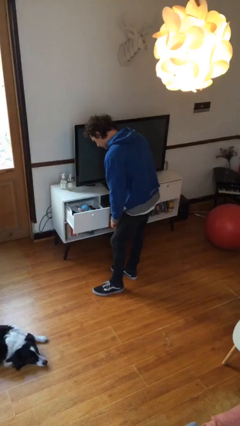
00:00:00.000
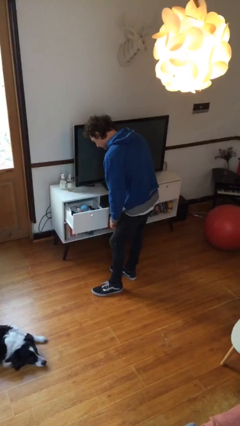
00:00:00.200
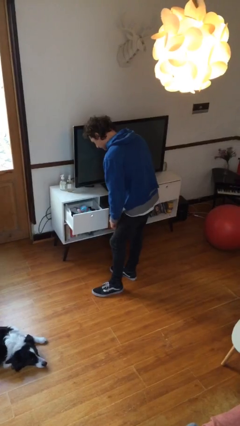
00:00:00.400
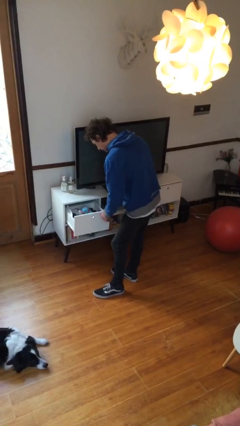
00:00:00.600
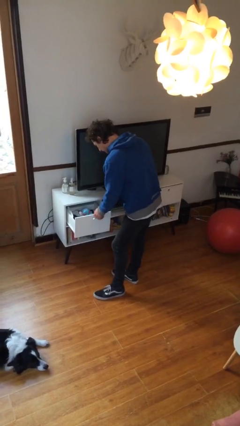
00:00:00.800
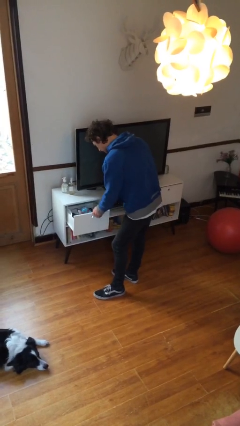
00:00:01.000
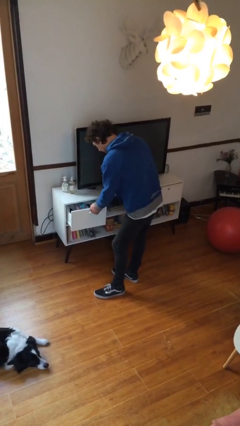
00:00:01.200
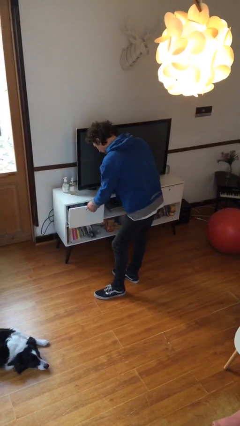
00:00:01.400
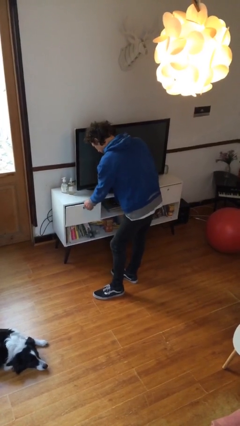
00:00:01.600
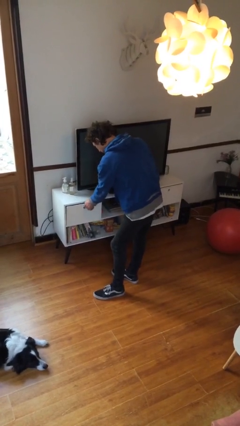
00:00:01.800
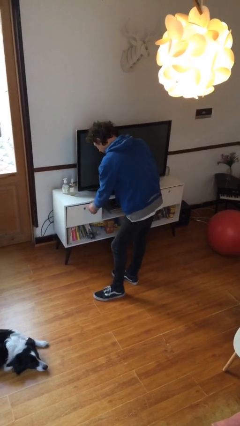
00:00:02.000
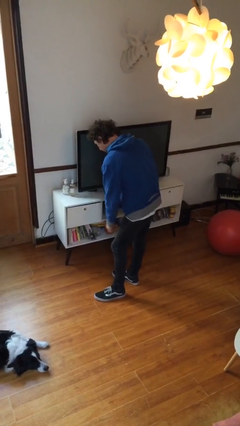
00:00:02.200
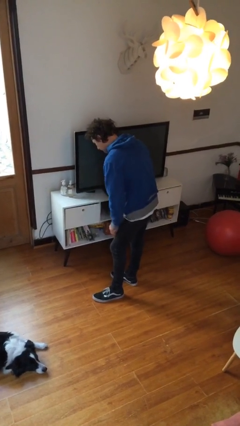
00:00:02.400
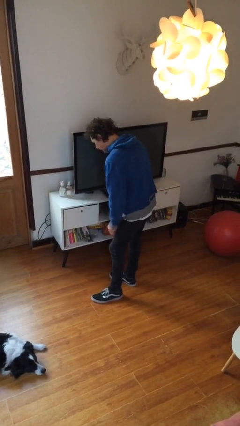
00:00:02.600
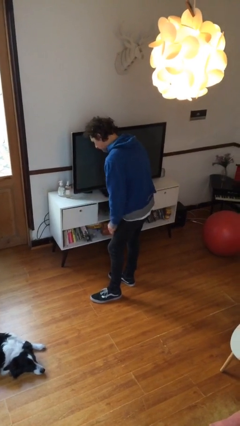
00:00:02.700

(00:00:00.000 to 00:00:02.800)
person closes dresser drawer

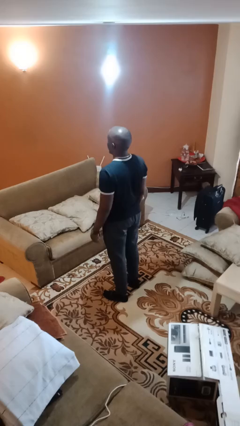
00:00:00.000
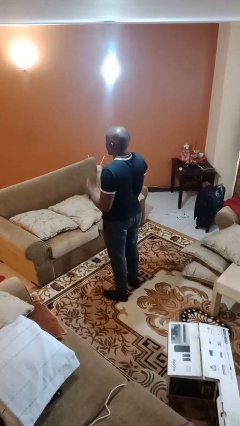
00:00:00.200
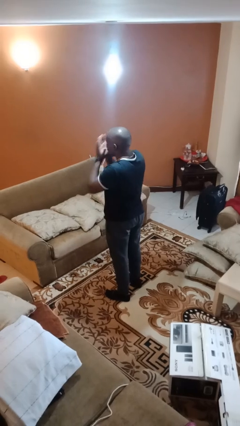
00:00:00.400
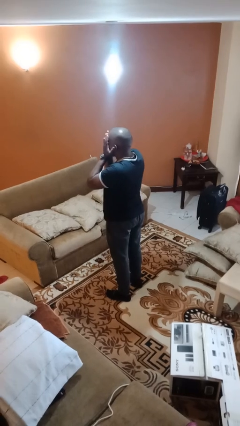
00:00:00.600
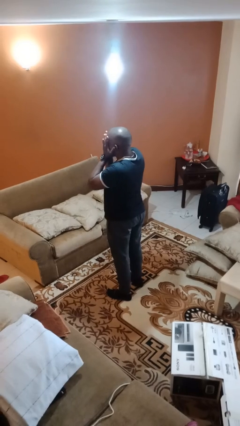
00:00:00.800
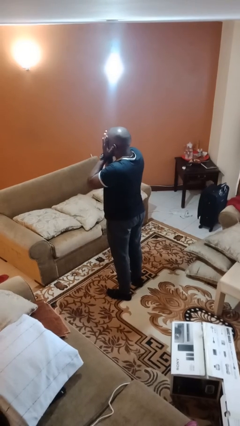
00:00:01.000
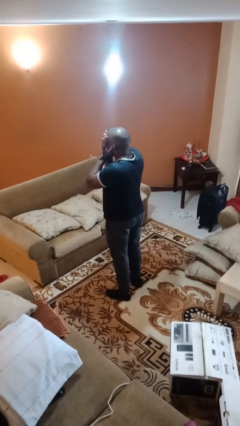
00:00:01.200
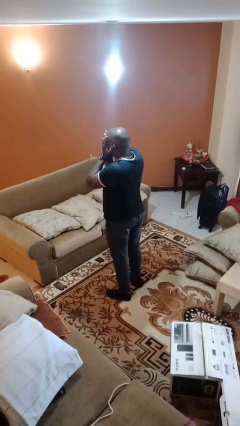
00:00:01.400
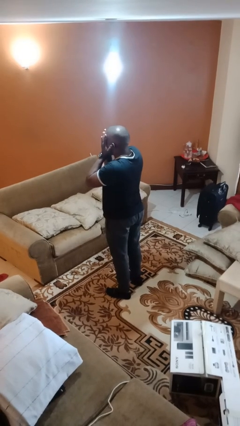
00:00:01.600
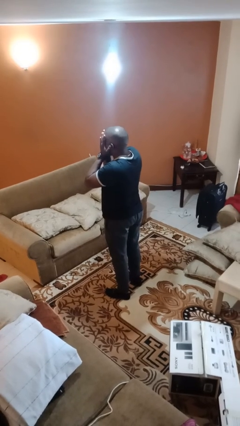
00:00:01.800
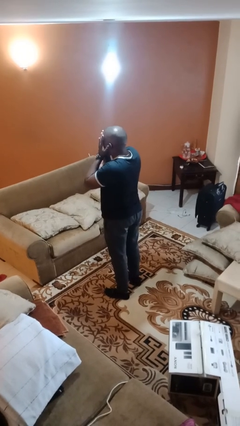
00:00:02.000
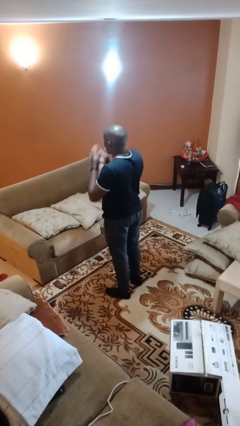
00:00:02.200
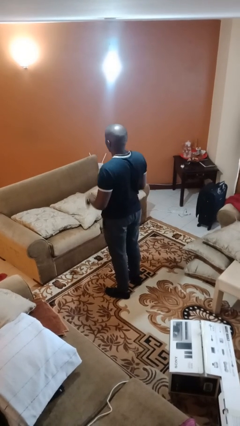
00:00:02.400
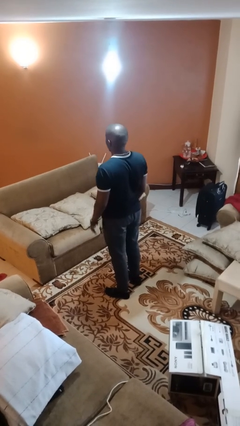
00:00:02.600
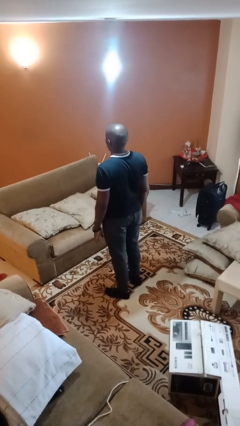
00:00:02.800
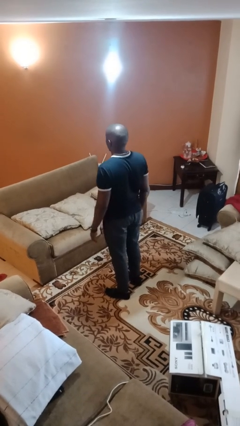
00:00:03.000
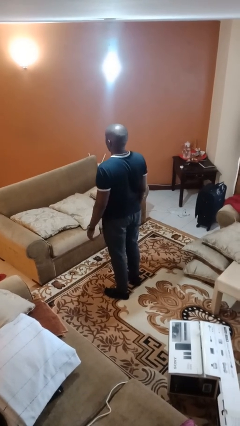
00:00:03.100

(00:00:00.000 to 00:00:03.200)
person covers face with hands

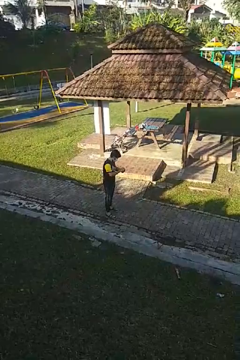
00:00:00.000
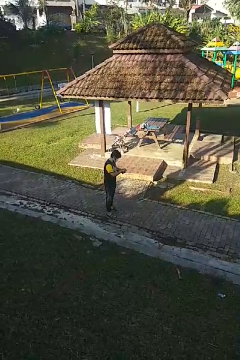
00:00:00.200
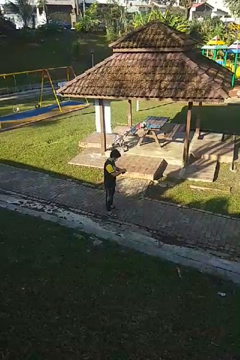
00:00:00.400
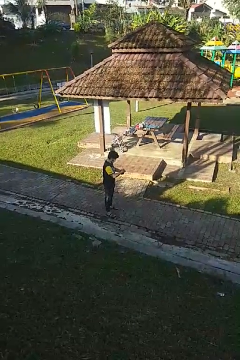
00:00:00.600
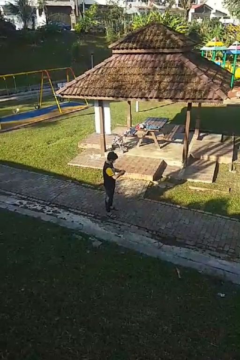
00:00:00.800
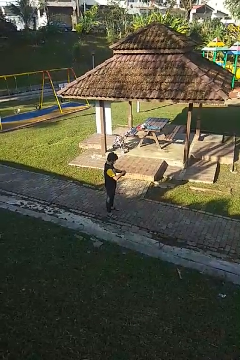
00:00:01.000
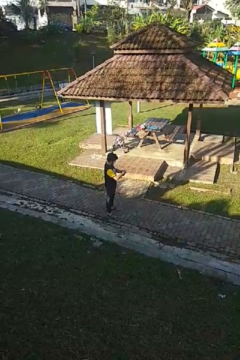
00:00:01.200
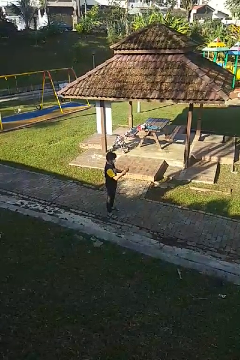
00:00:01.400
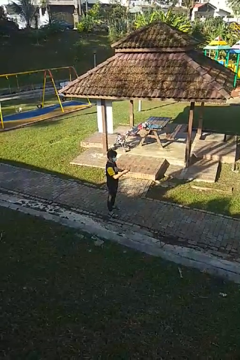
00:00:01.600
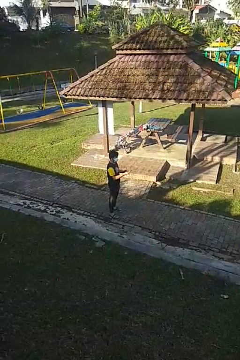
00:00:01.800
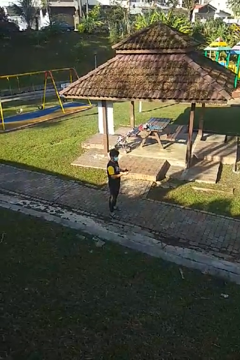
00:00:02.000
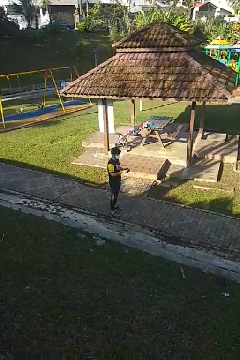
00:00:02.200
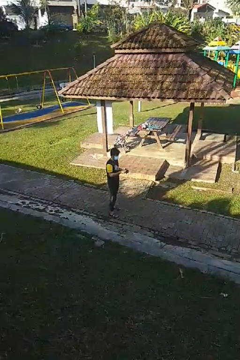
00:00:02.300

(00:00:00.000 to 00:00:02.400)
person takes object from purse

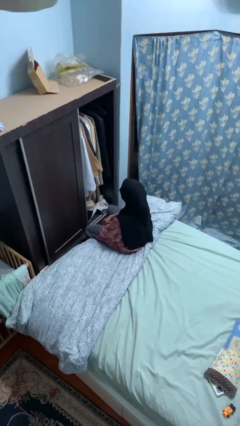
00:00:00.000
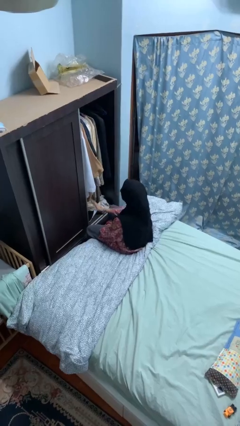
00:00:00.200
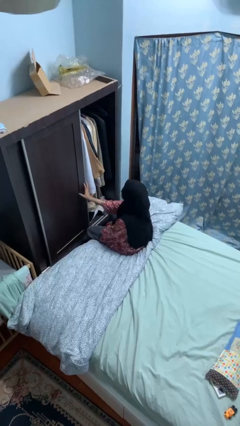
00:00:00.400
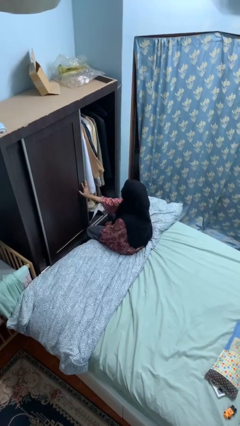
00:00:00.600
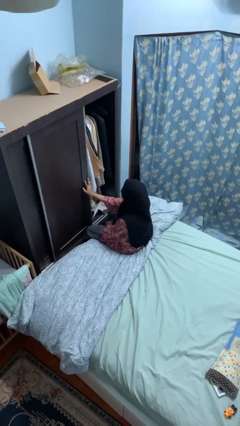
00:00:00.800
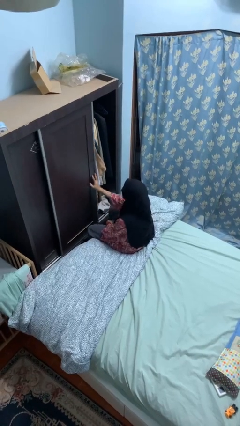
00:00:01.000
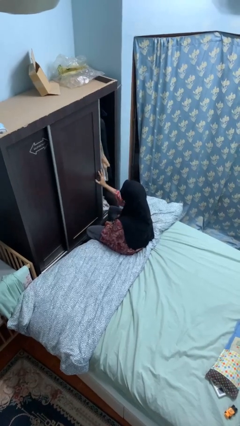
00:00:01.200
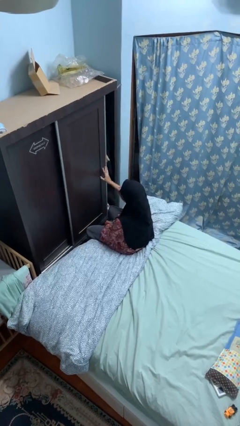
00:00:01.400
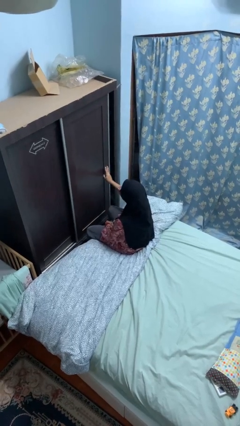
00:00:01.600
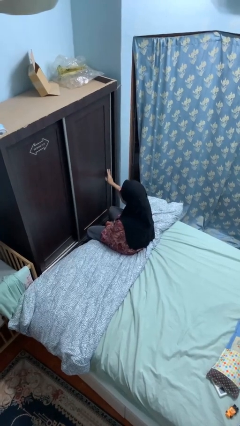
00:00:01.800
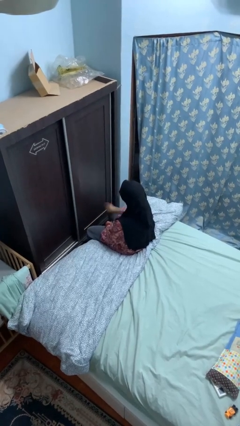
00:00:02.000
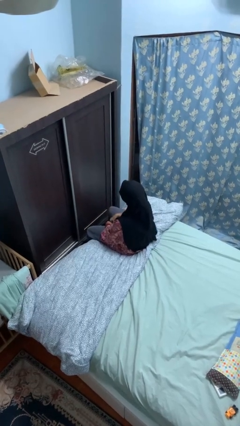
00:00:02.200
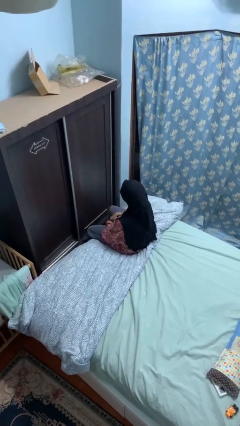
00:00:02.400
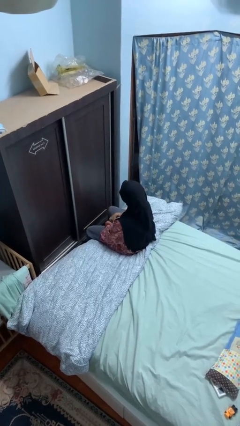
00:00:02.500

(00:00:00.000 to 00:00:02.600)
person closes closet door

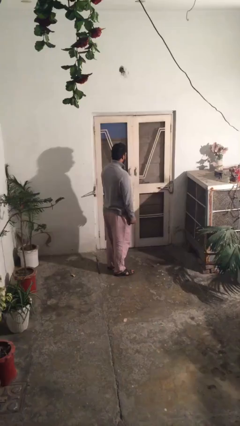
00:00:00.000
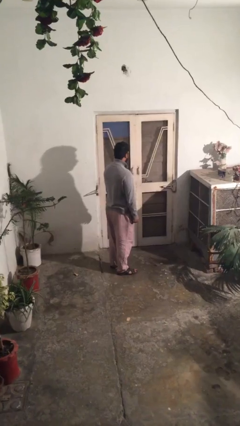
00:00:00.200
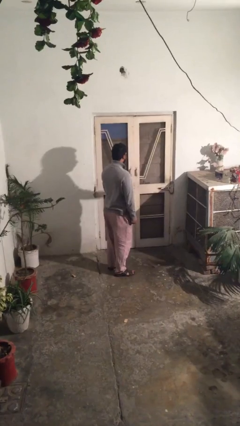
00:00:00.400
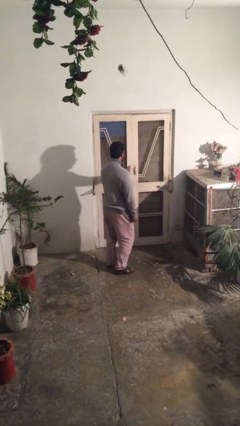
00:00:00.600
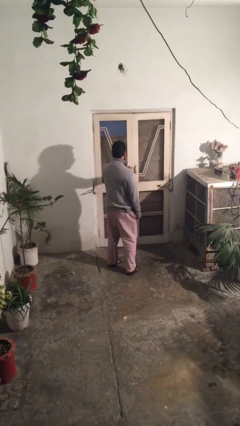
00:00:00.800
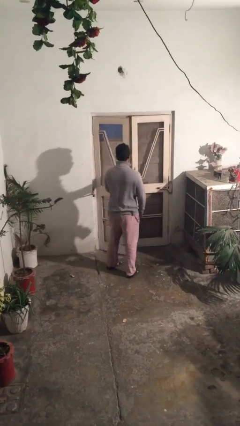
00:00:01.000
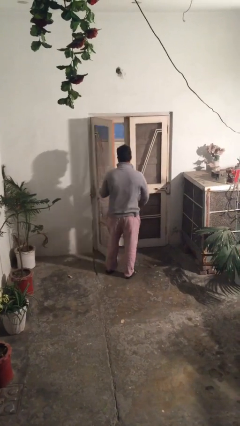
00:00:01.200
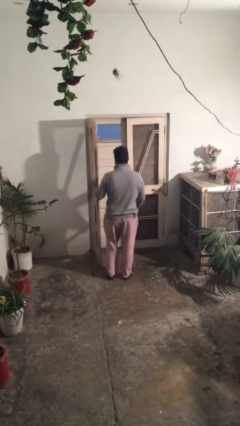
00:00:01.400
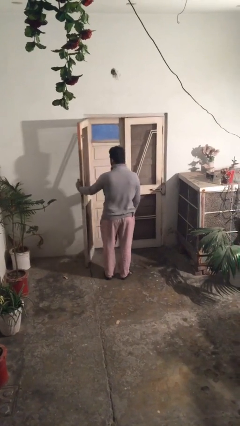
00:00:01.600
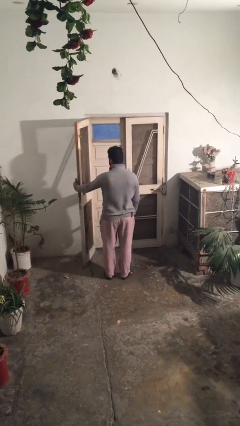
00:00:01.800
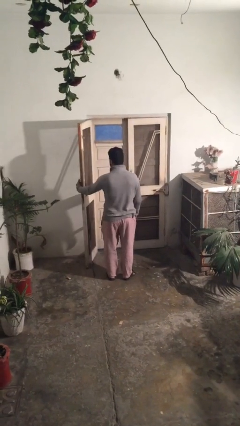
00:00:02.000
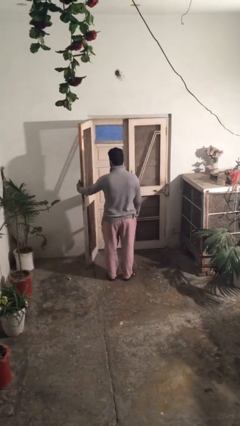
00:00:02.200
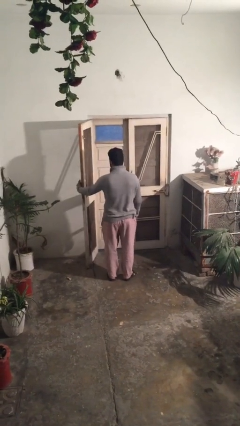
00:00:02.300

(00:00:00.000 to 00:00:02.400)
person opens facility door

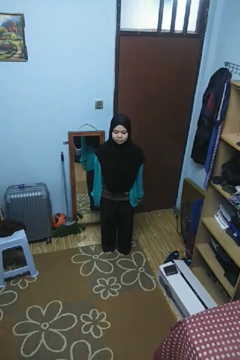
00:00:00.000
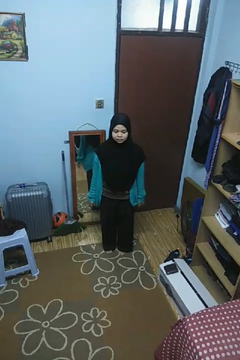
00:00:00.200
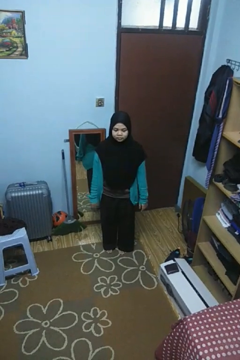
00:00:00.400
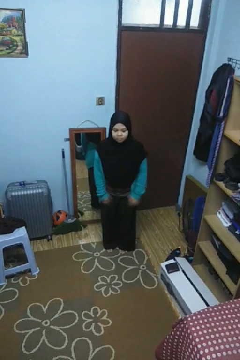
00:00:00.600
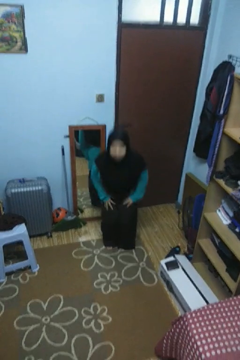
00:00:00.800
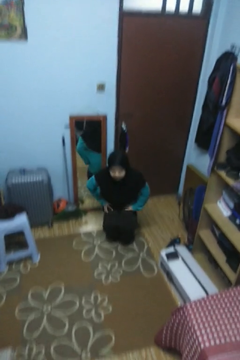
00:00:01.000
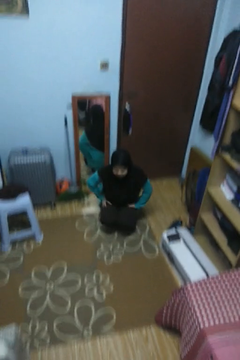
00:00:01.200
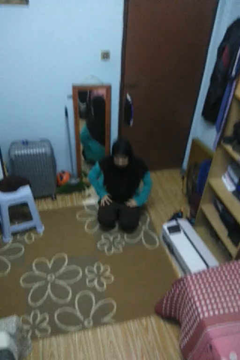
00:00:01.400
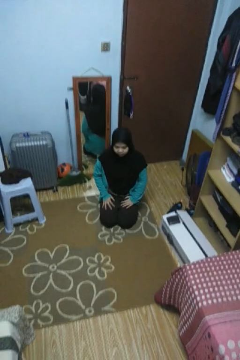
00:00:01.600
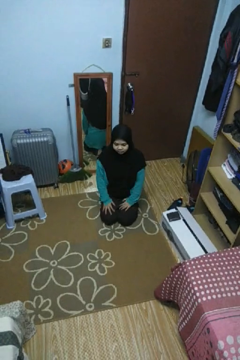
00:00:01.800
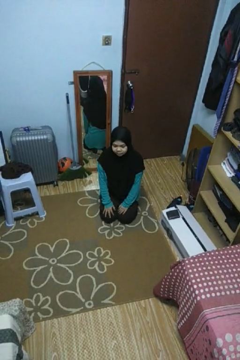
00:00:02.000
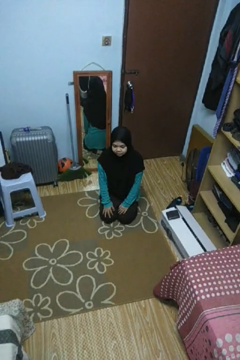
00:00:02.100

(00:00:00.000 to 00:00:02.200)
person kneels

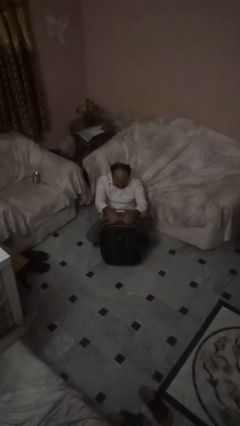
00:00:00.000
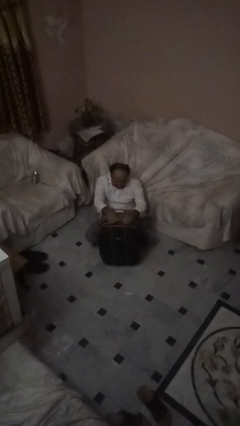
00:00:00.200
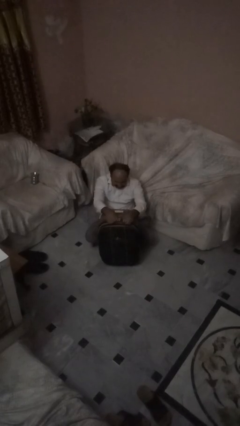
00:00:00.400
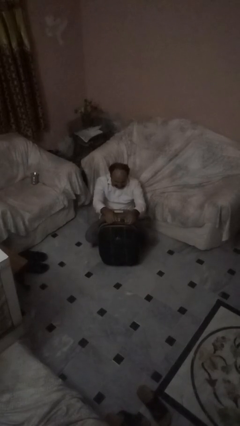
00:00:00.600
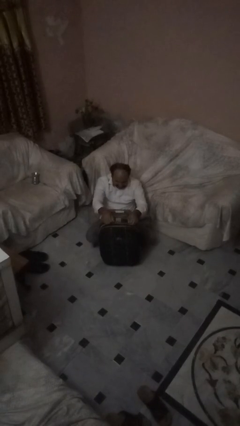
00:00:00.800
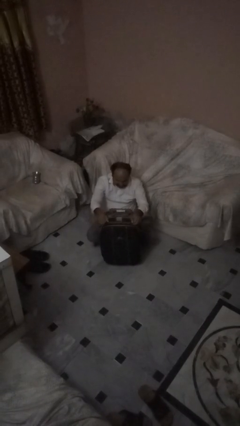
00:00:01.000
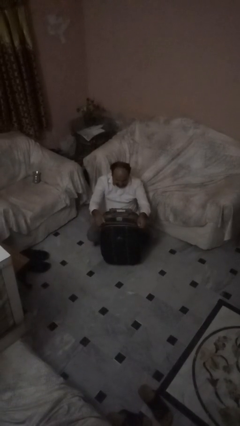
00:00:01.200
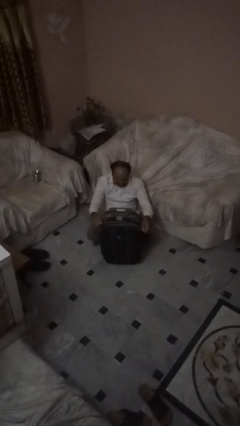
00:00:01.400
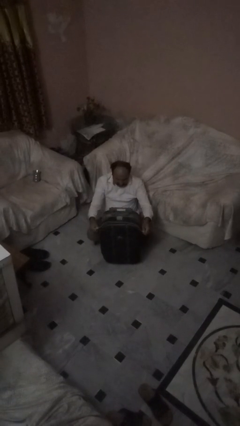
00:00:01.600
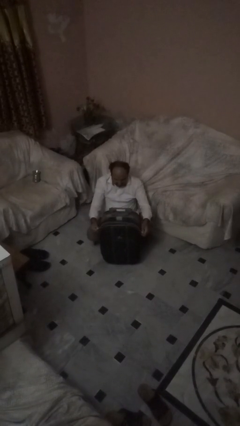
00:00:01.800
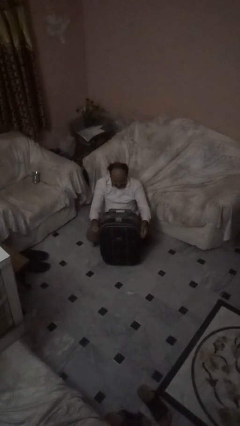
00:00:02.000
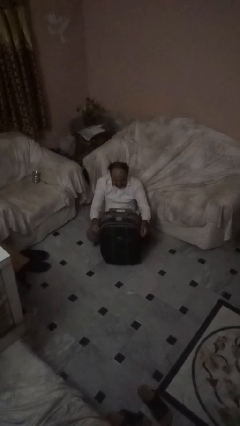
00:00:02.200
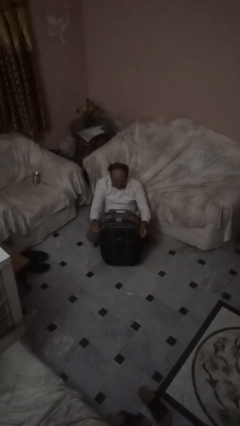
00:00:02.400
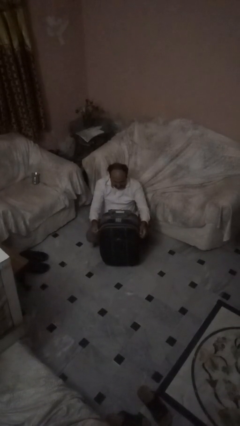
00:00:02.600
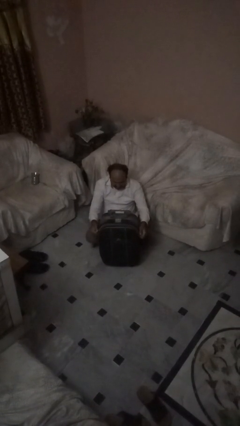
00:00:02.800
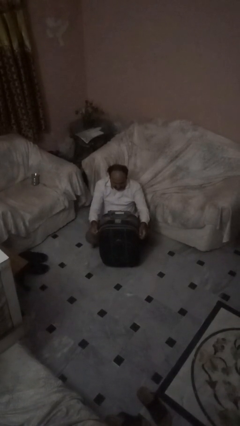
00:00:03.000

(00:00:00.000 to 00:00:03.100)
person opens suitcase
